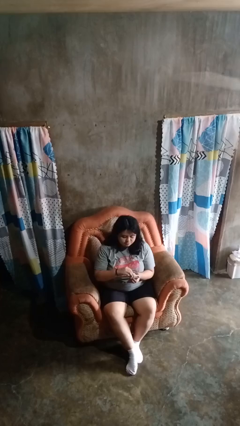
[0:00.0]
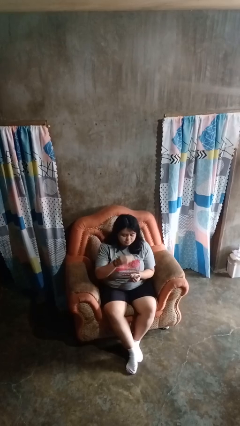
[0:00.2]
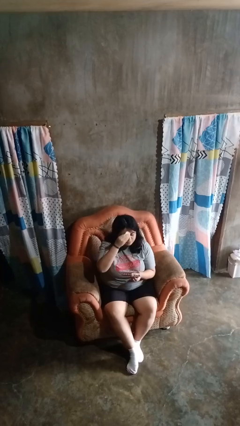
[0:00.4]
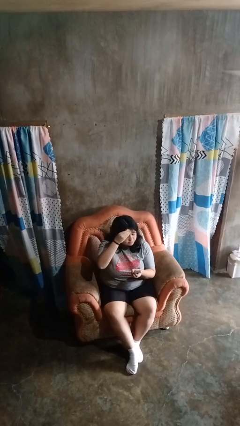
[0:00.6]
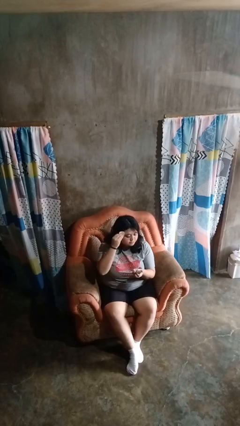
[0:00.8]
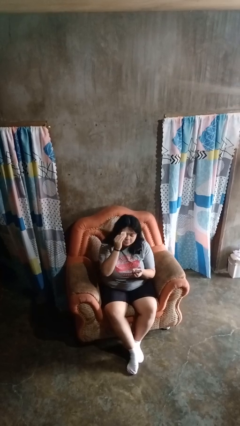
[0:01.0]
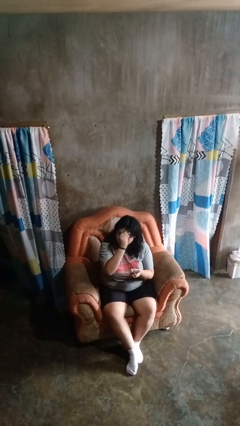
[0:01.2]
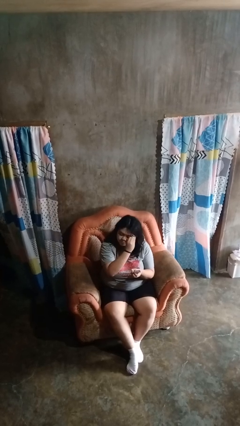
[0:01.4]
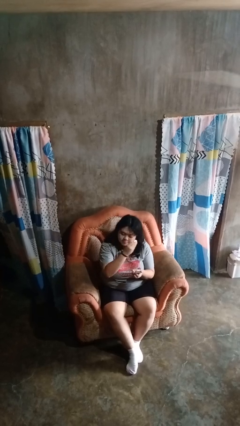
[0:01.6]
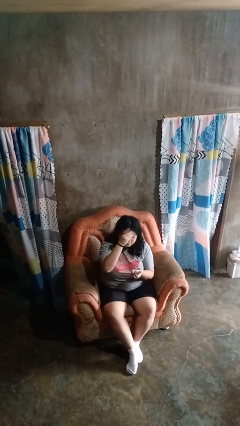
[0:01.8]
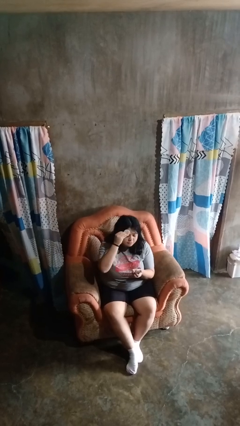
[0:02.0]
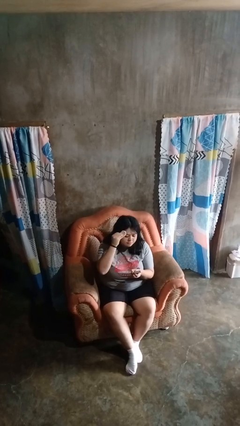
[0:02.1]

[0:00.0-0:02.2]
person applies foundation makeup

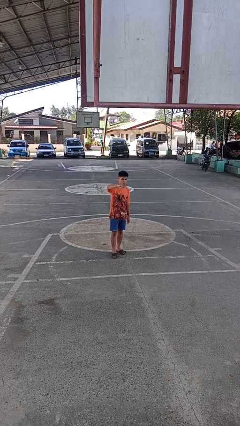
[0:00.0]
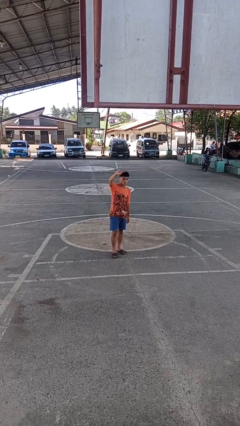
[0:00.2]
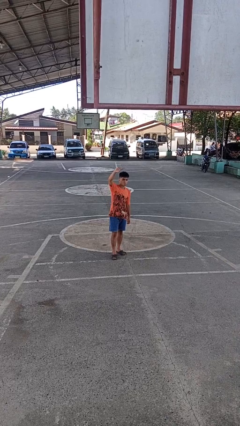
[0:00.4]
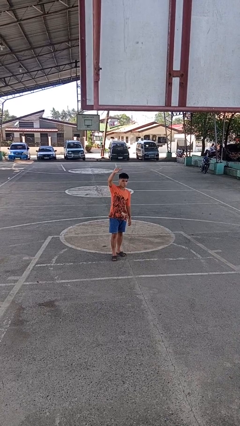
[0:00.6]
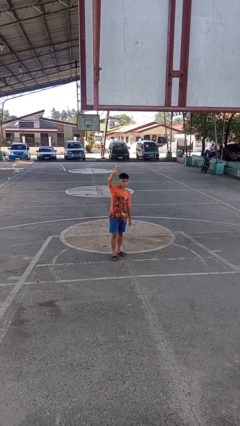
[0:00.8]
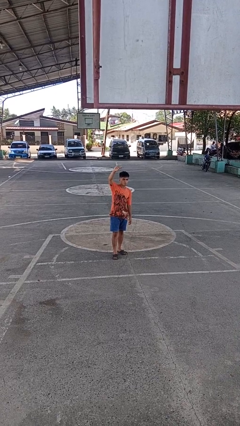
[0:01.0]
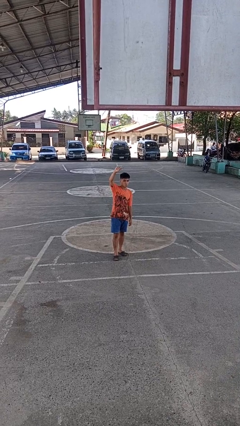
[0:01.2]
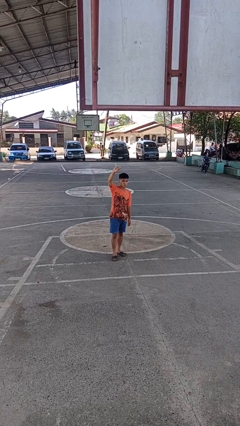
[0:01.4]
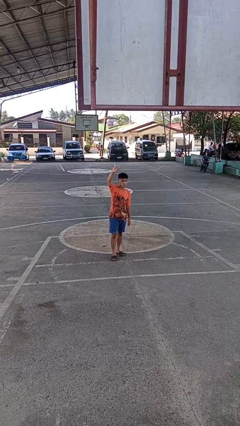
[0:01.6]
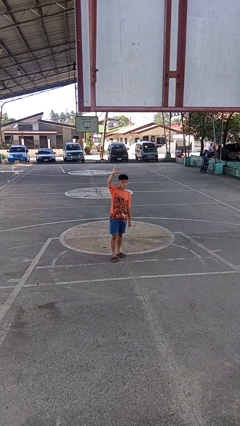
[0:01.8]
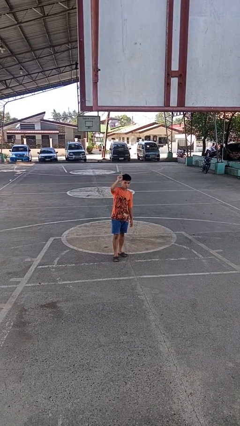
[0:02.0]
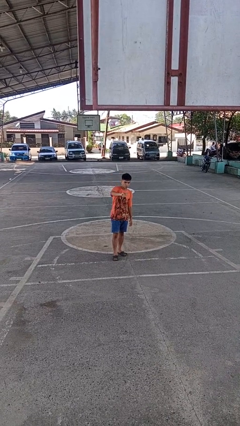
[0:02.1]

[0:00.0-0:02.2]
person gestures swipe up

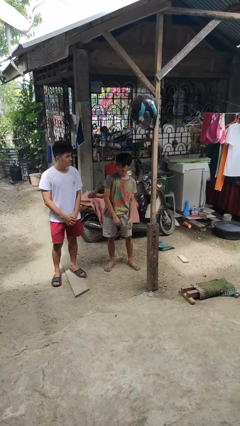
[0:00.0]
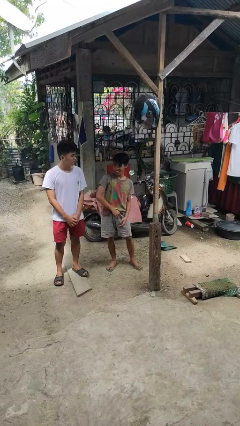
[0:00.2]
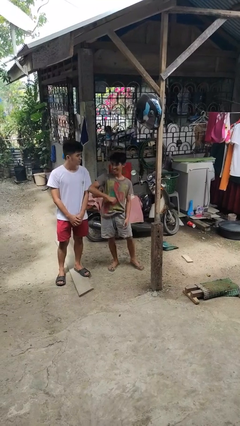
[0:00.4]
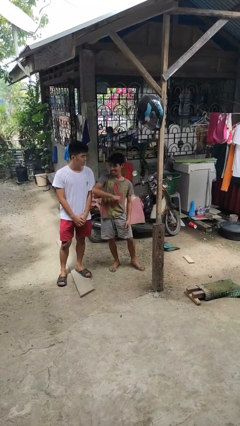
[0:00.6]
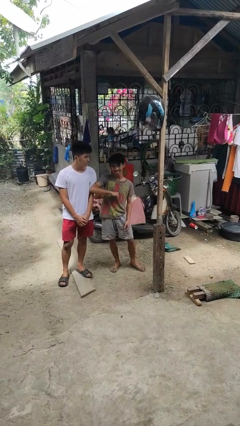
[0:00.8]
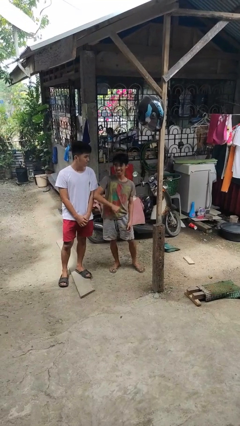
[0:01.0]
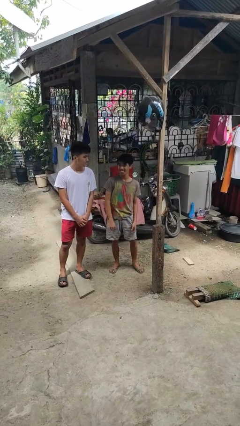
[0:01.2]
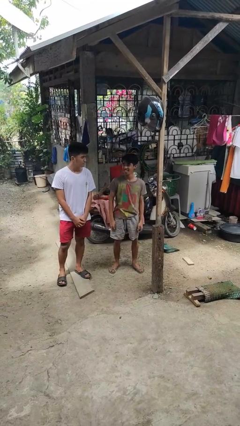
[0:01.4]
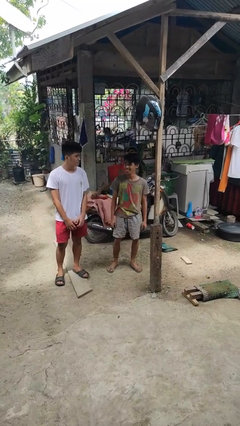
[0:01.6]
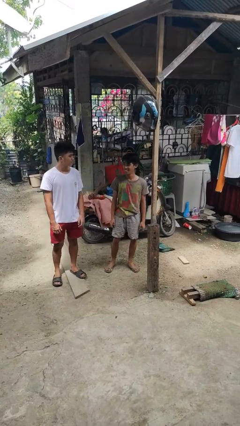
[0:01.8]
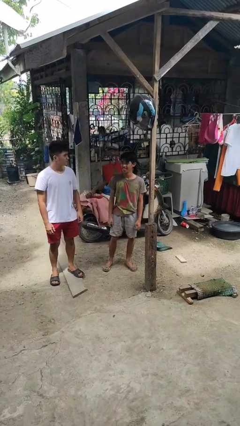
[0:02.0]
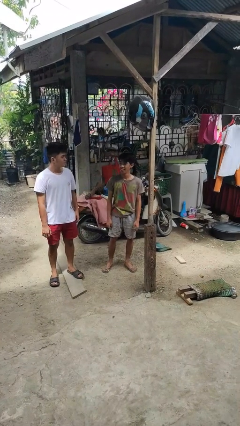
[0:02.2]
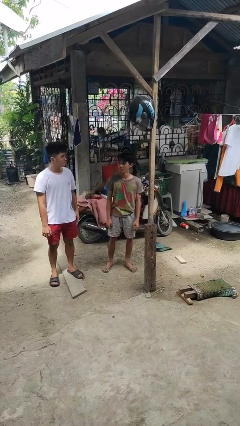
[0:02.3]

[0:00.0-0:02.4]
person nudges person with elbow

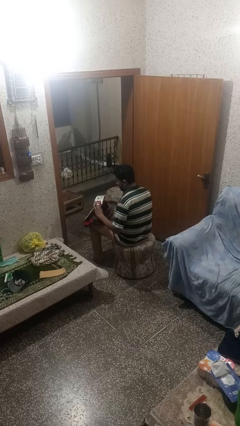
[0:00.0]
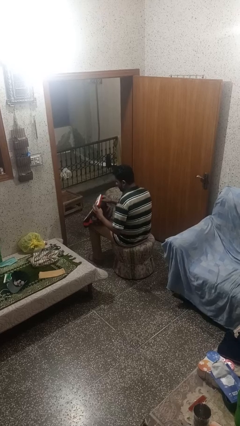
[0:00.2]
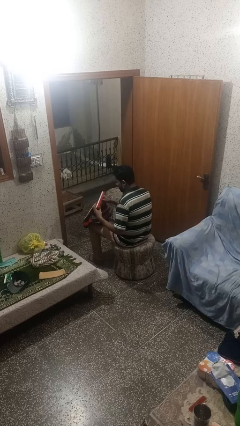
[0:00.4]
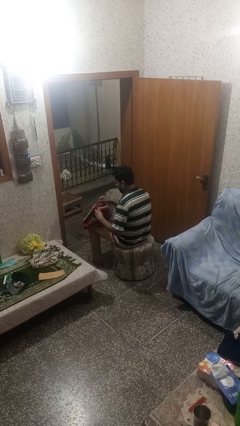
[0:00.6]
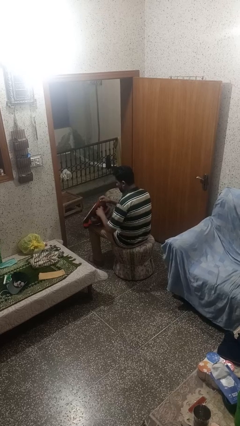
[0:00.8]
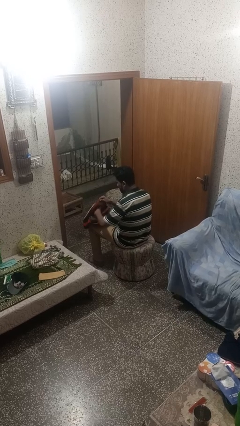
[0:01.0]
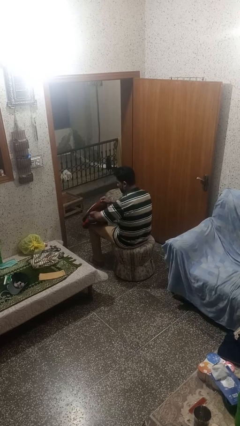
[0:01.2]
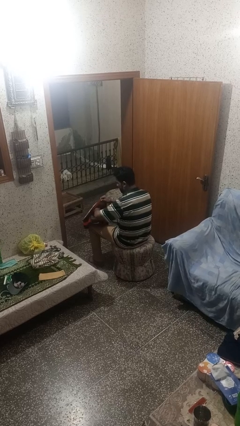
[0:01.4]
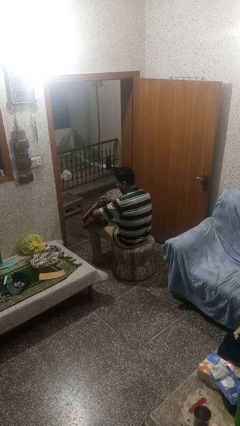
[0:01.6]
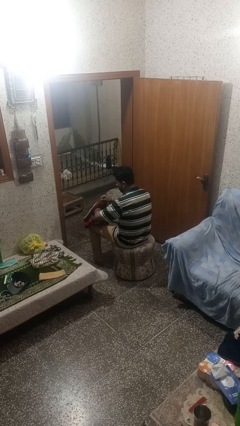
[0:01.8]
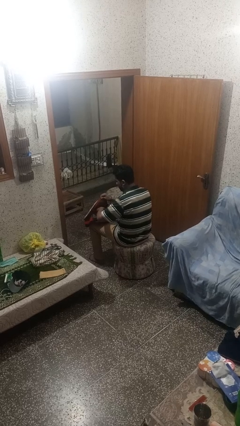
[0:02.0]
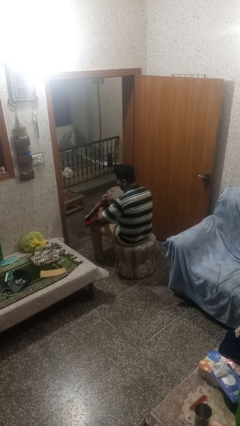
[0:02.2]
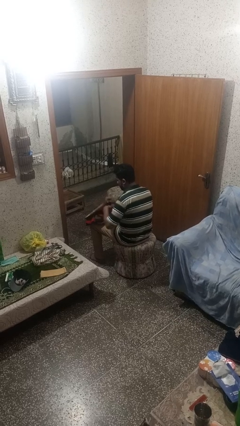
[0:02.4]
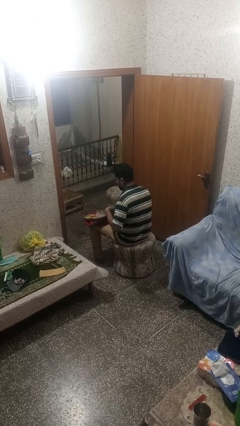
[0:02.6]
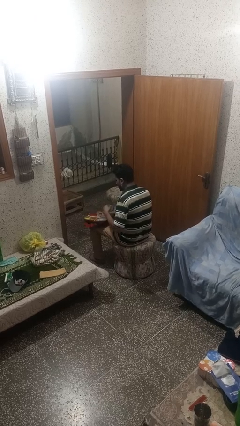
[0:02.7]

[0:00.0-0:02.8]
person puts object into backpack

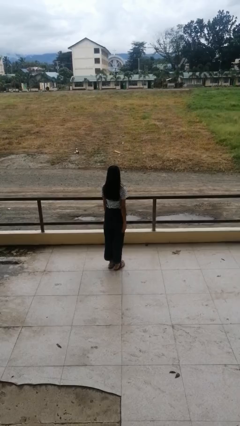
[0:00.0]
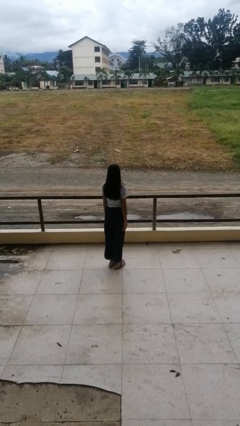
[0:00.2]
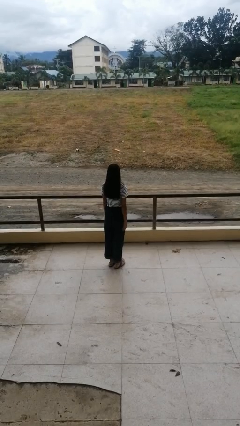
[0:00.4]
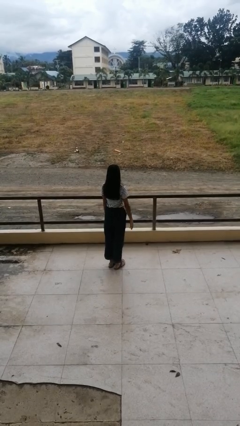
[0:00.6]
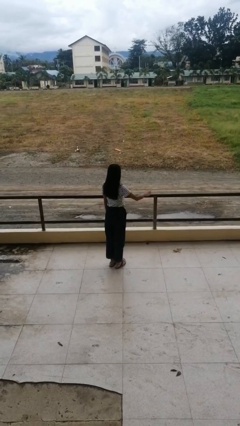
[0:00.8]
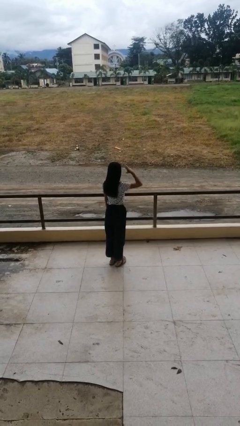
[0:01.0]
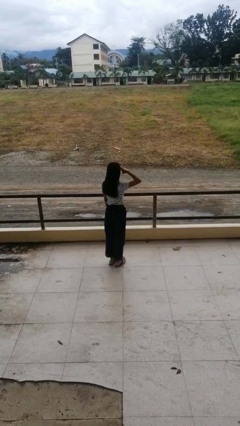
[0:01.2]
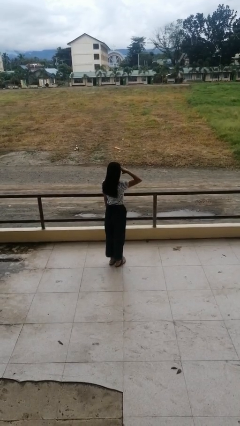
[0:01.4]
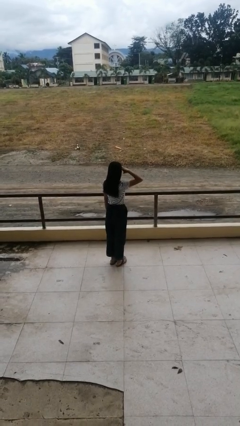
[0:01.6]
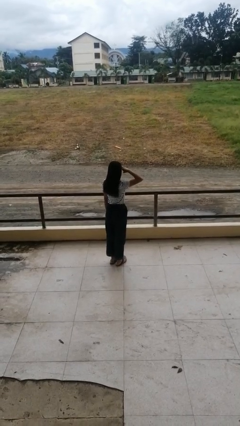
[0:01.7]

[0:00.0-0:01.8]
person salutes

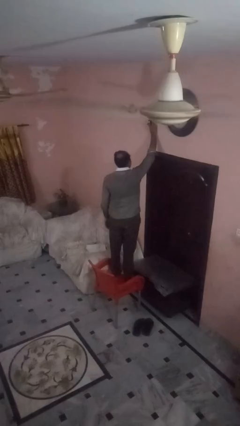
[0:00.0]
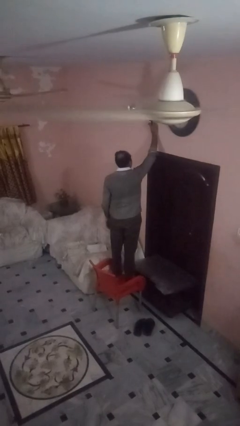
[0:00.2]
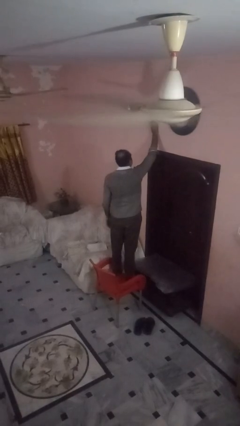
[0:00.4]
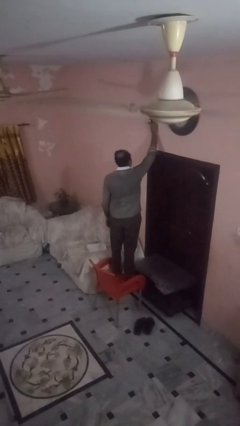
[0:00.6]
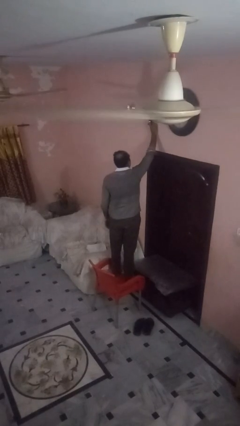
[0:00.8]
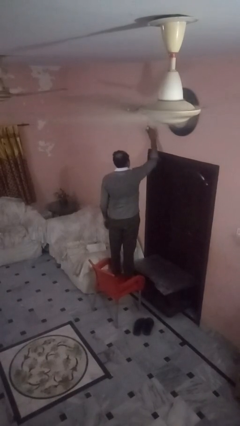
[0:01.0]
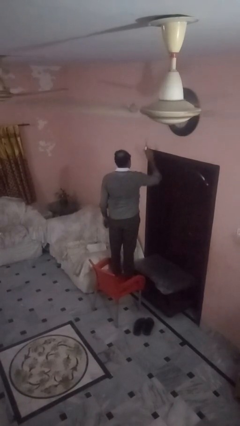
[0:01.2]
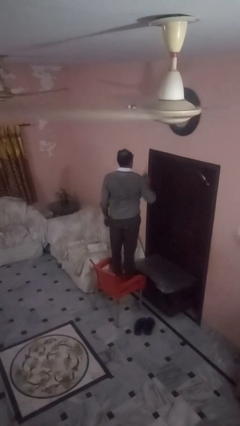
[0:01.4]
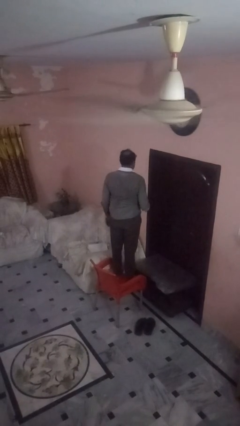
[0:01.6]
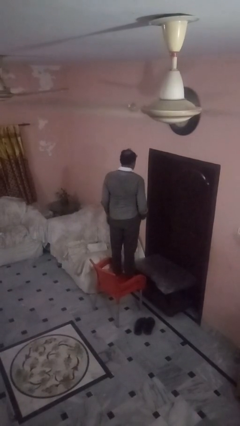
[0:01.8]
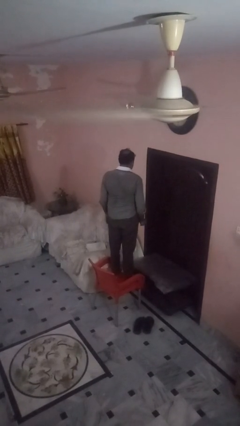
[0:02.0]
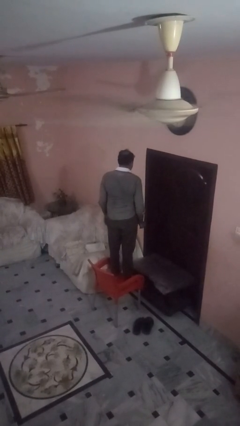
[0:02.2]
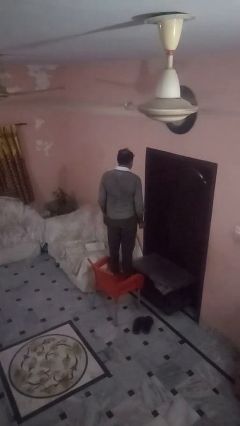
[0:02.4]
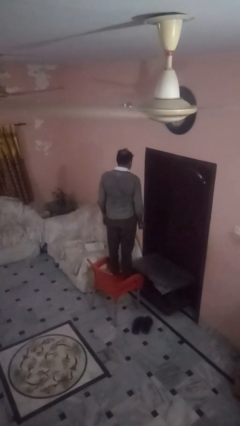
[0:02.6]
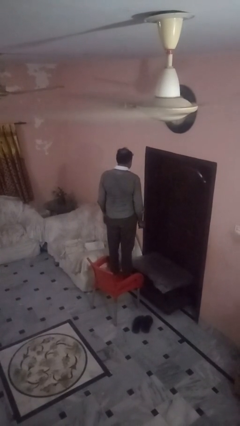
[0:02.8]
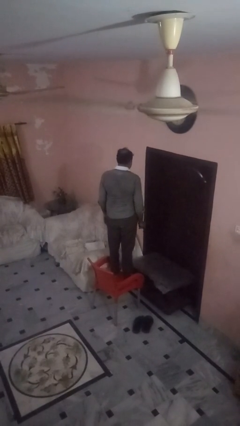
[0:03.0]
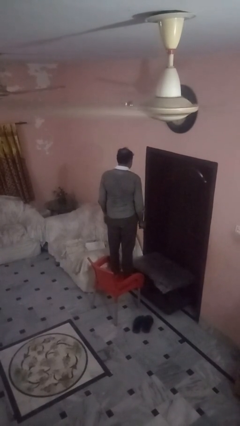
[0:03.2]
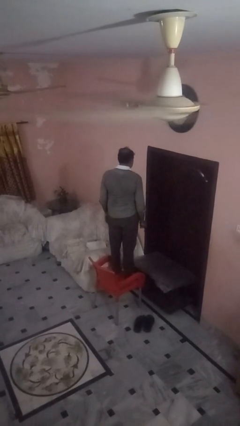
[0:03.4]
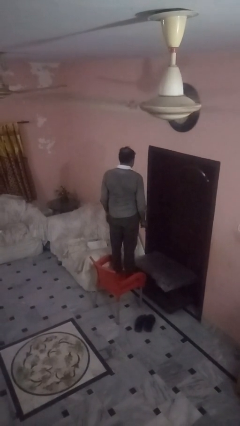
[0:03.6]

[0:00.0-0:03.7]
person takes down smoke detector

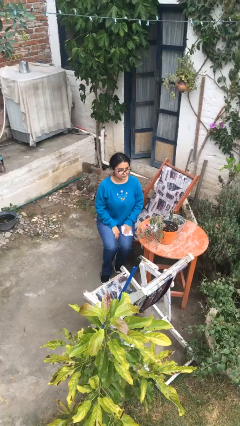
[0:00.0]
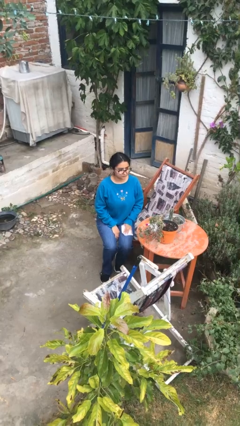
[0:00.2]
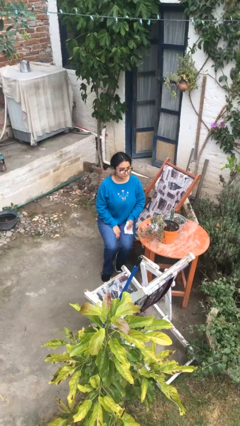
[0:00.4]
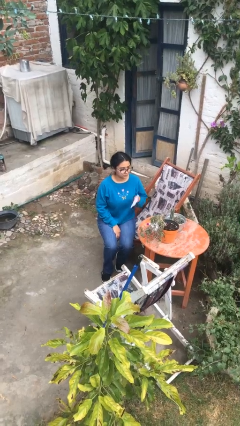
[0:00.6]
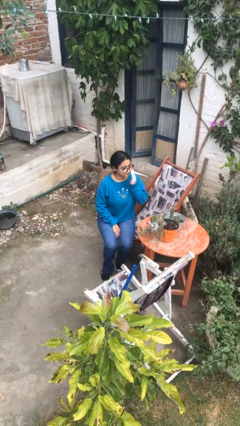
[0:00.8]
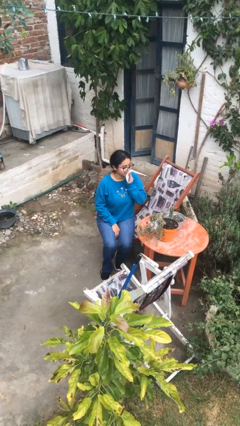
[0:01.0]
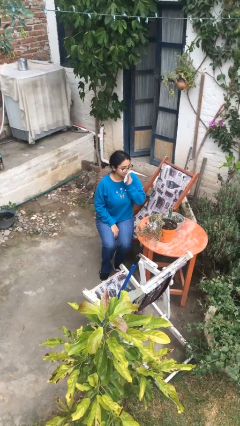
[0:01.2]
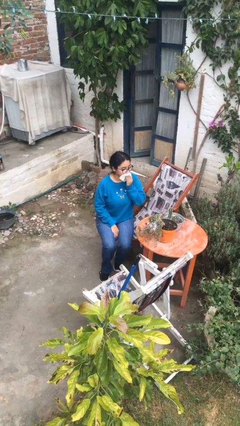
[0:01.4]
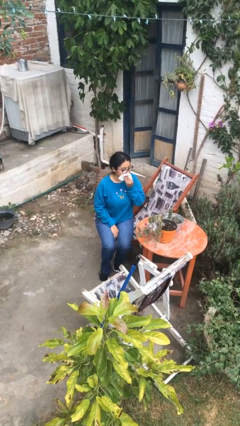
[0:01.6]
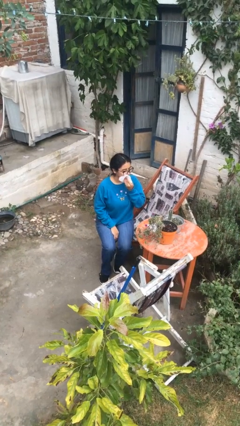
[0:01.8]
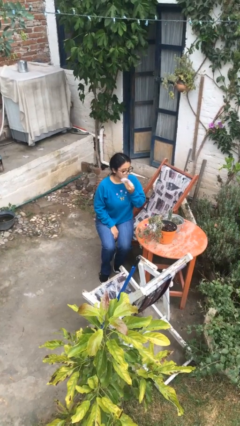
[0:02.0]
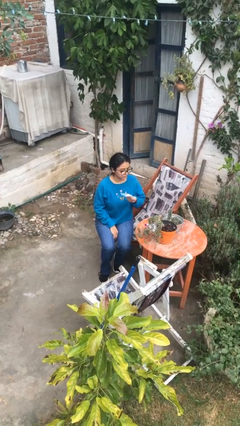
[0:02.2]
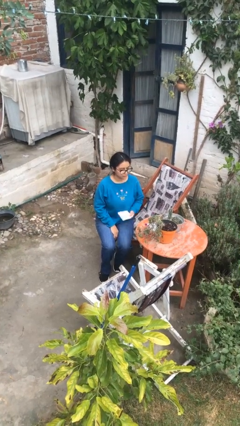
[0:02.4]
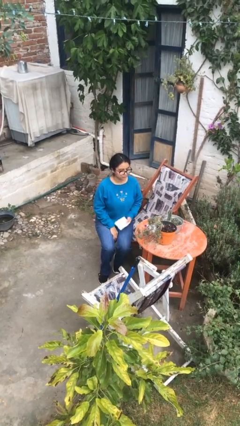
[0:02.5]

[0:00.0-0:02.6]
person wipes mouth with napkin
